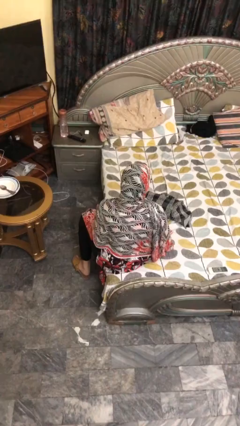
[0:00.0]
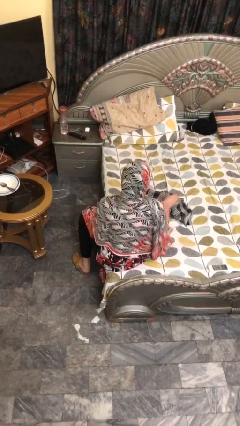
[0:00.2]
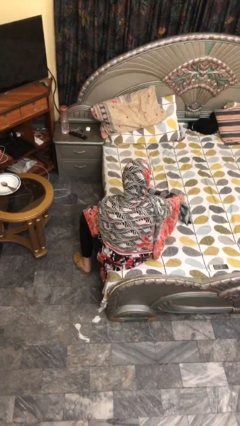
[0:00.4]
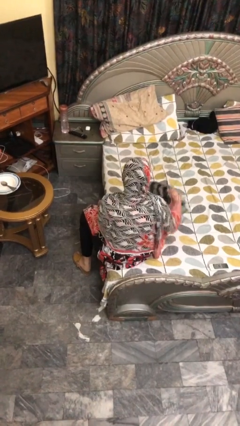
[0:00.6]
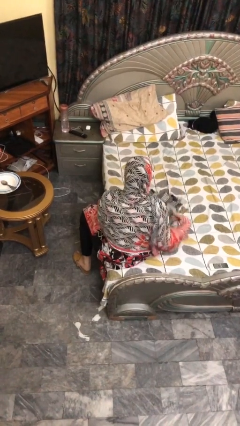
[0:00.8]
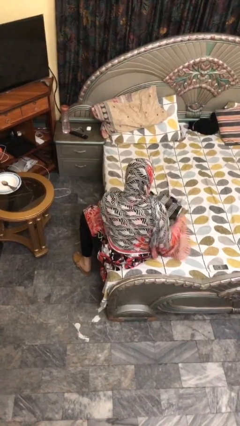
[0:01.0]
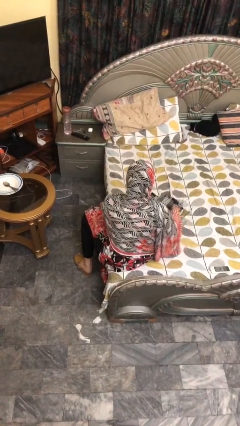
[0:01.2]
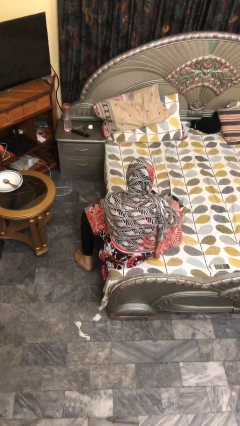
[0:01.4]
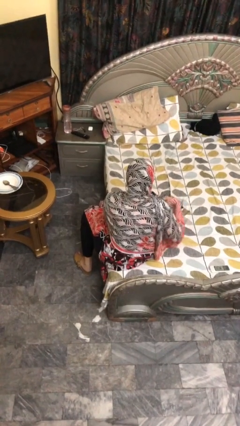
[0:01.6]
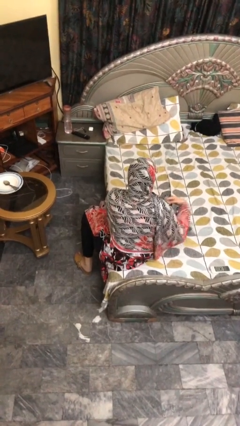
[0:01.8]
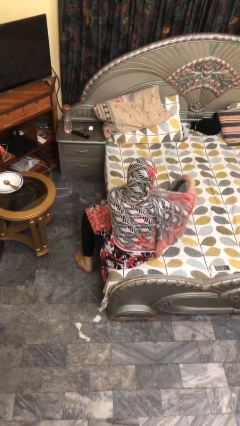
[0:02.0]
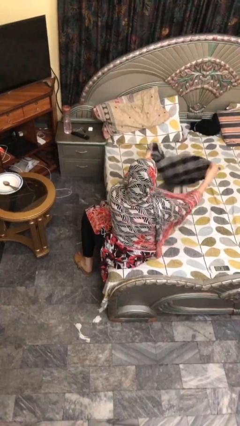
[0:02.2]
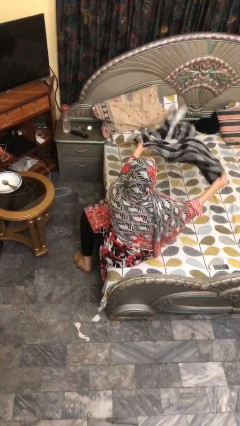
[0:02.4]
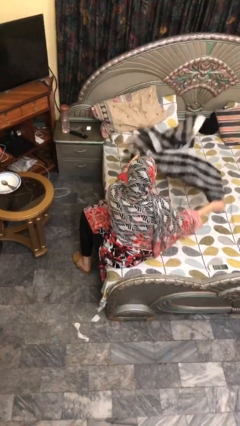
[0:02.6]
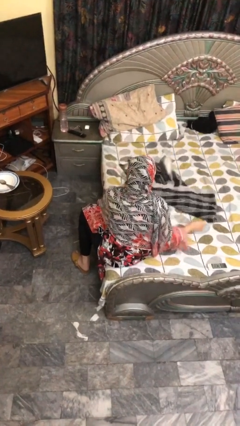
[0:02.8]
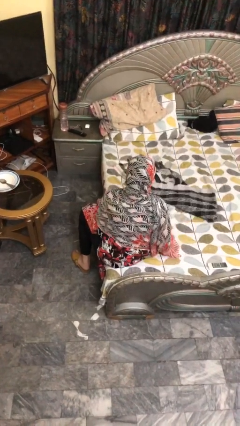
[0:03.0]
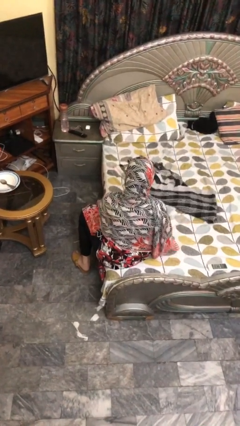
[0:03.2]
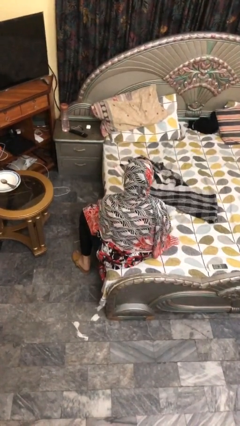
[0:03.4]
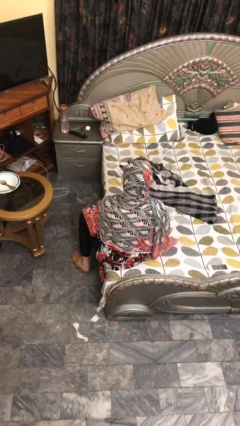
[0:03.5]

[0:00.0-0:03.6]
person unfolds blanket

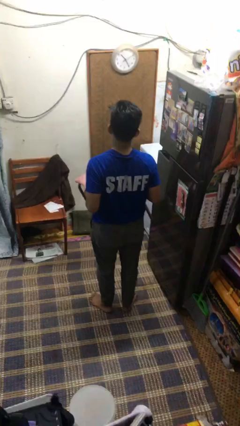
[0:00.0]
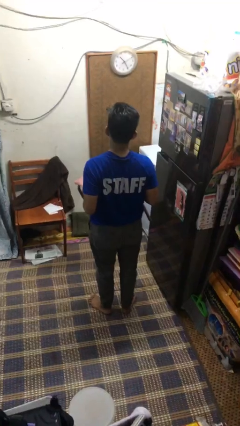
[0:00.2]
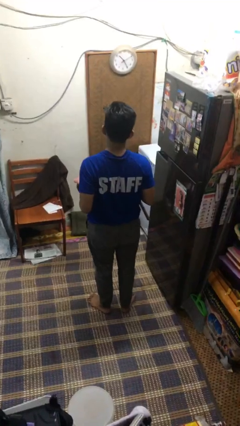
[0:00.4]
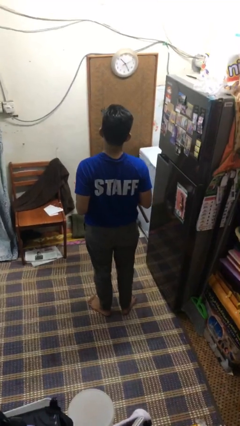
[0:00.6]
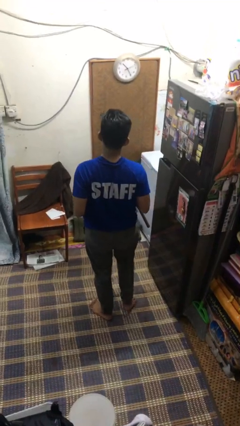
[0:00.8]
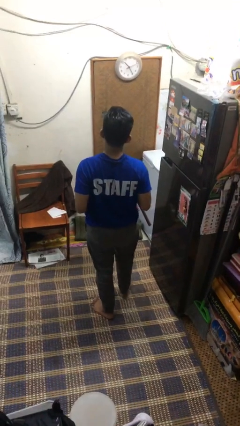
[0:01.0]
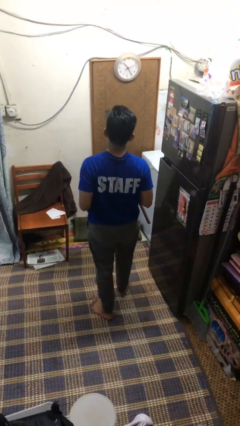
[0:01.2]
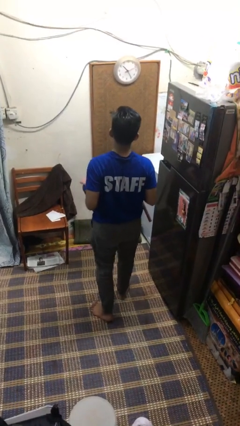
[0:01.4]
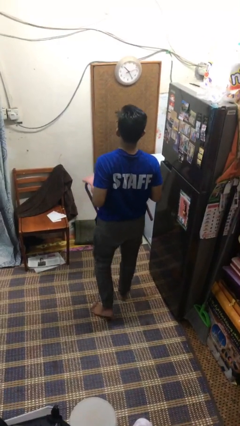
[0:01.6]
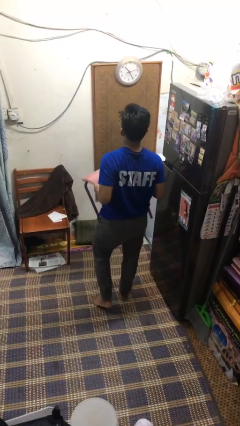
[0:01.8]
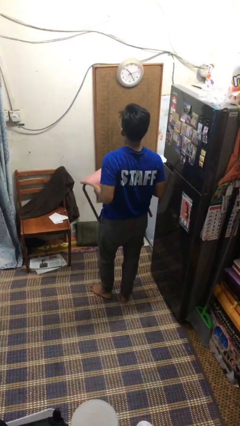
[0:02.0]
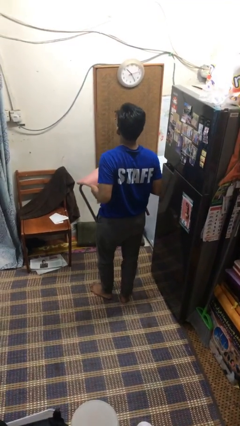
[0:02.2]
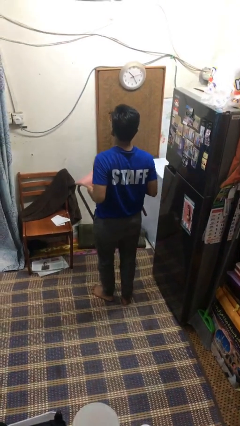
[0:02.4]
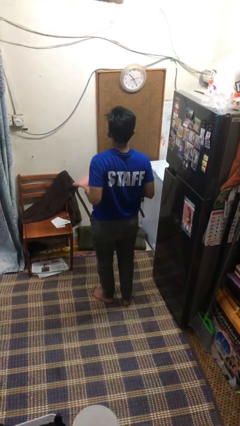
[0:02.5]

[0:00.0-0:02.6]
person carries furniture

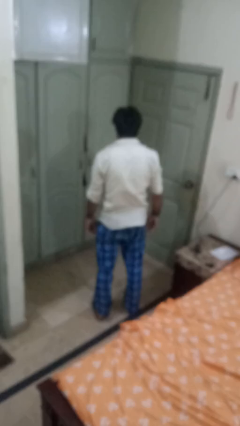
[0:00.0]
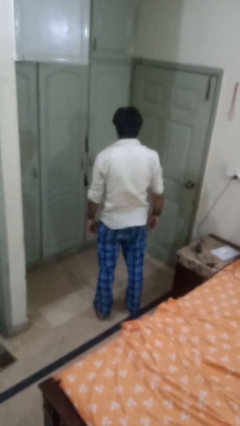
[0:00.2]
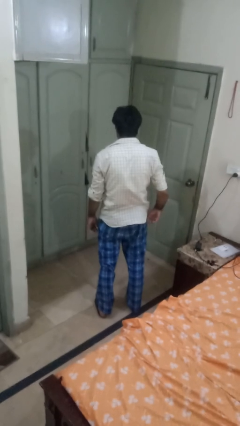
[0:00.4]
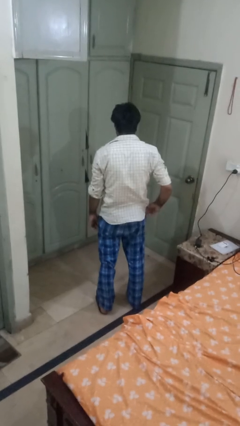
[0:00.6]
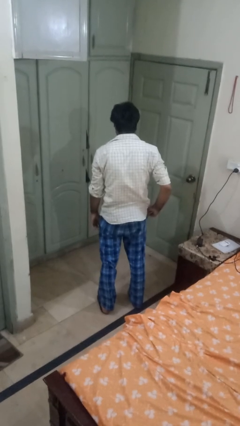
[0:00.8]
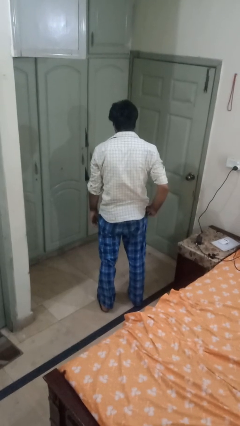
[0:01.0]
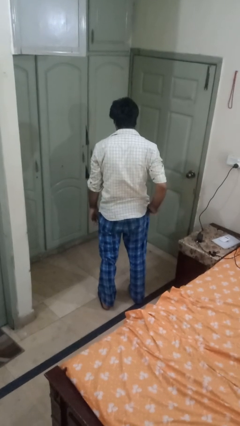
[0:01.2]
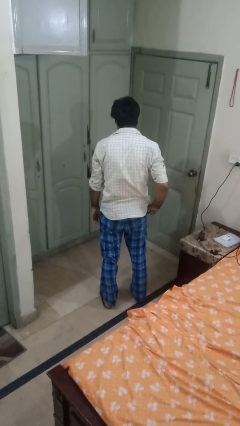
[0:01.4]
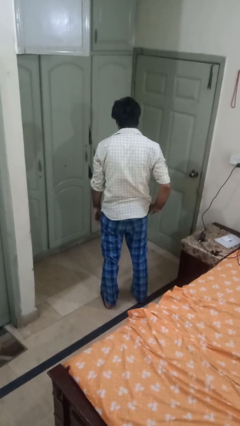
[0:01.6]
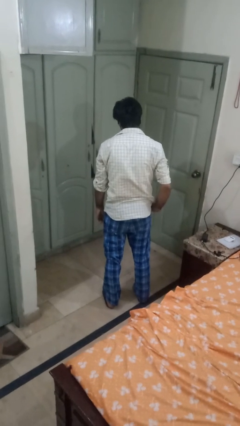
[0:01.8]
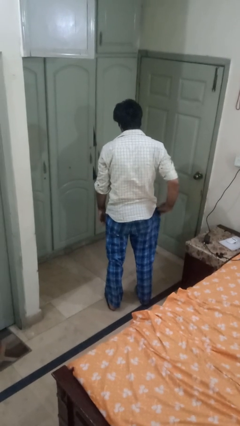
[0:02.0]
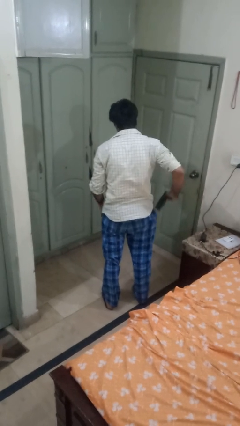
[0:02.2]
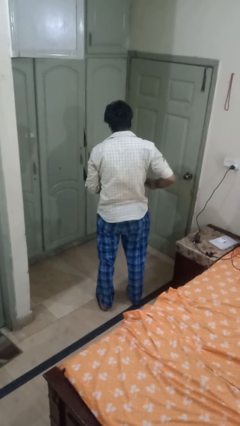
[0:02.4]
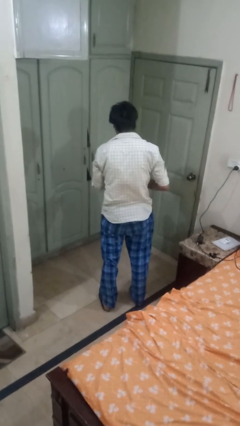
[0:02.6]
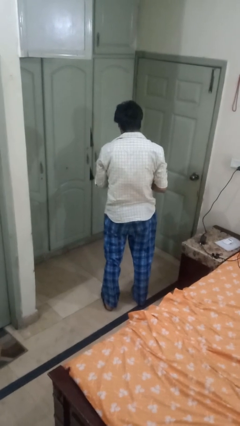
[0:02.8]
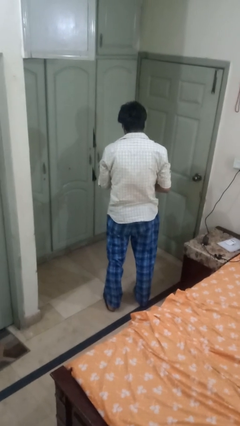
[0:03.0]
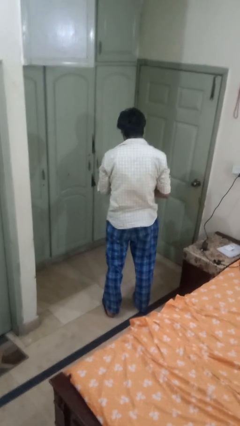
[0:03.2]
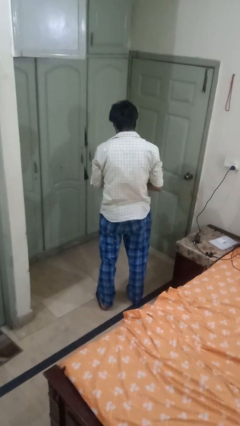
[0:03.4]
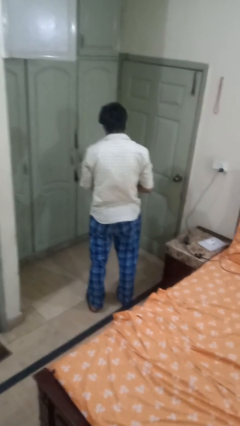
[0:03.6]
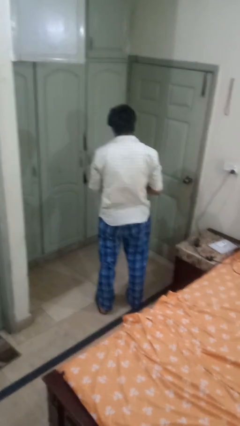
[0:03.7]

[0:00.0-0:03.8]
person takes phone from pocket

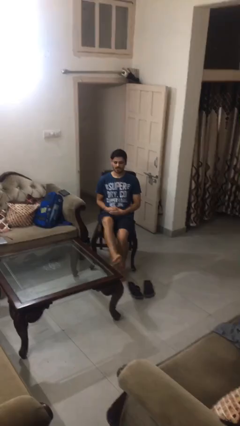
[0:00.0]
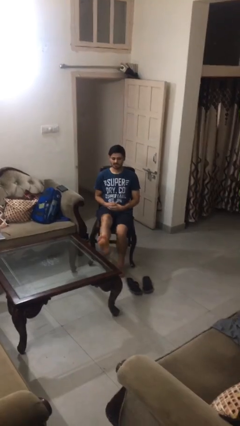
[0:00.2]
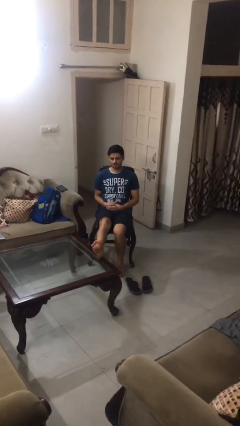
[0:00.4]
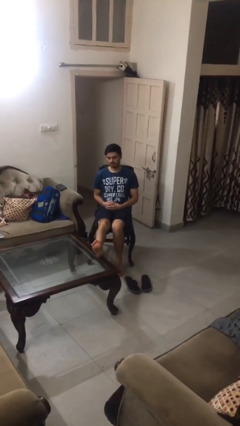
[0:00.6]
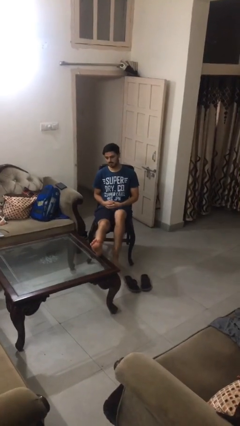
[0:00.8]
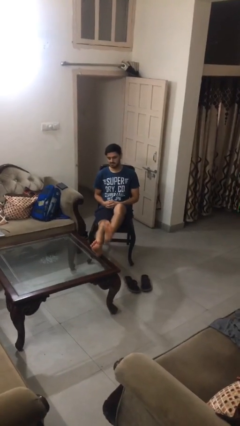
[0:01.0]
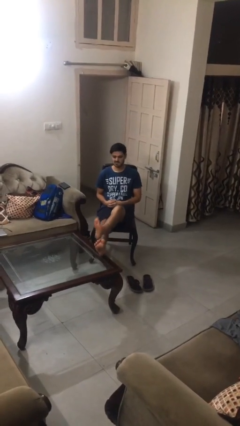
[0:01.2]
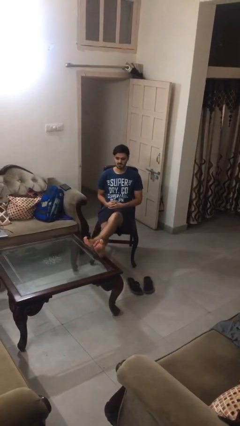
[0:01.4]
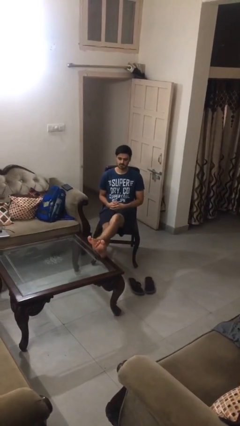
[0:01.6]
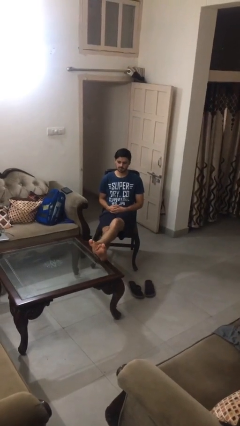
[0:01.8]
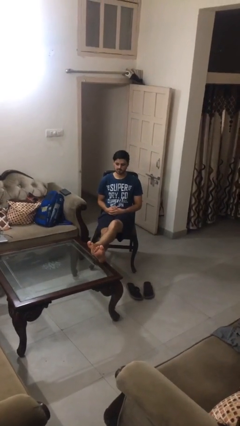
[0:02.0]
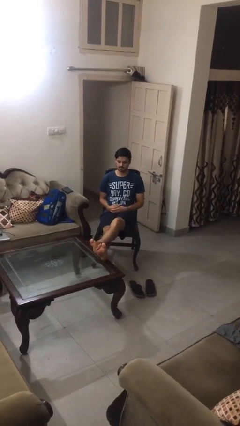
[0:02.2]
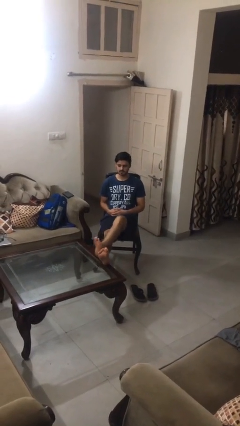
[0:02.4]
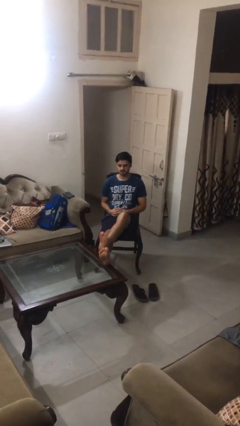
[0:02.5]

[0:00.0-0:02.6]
person puts feet up

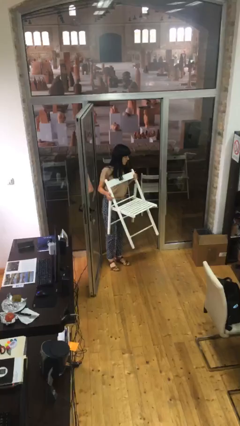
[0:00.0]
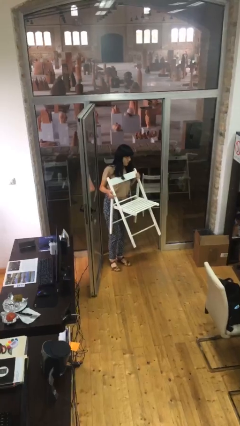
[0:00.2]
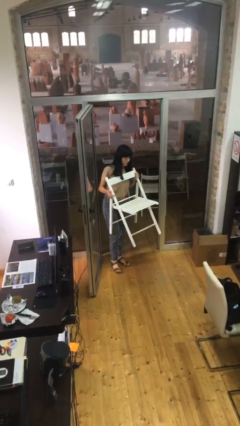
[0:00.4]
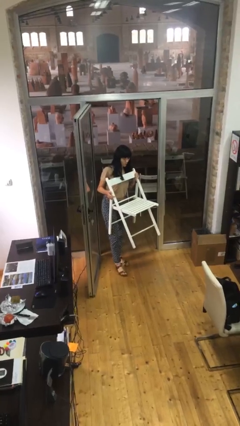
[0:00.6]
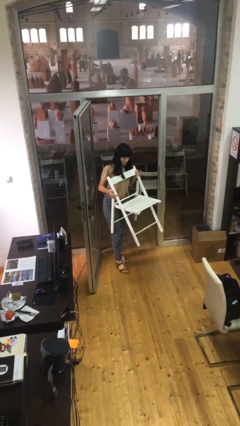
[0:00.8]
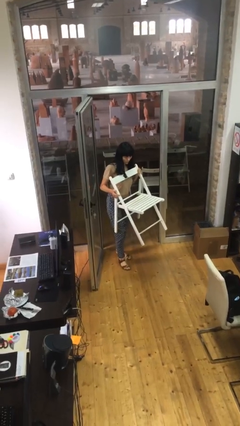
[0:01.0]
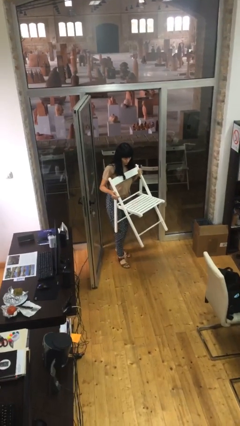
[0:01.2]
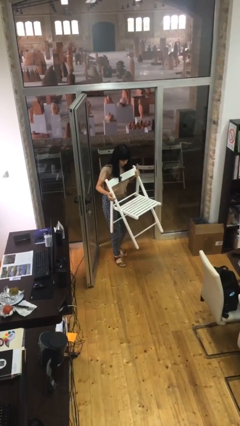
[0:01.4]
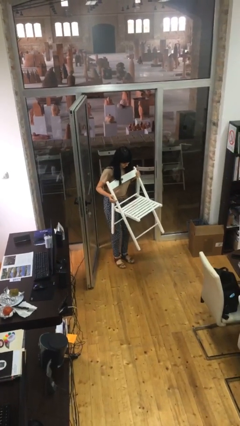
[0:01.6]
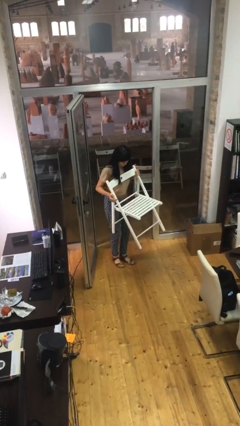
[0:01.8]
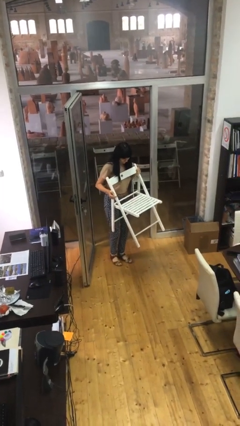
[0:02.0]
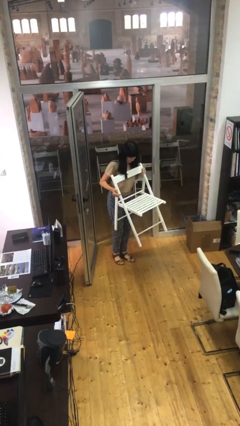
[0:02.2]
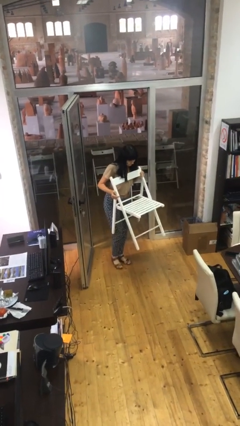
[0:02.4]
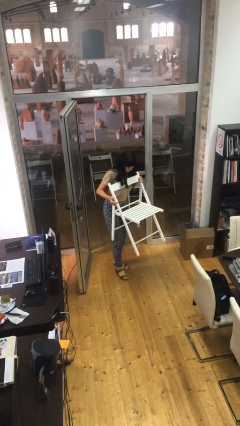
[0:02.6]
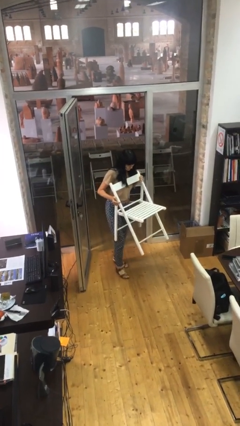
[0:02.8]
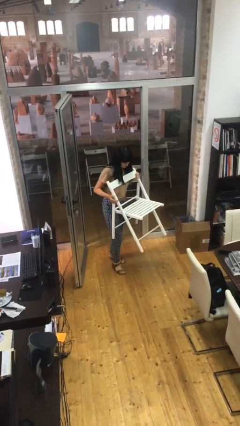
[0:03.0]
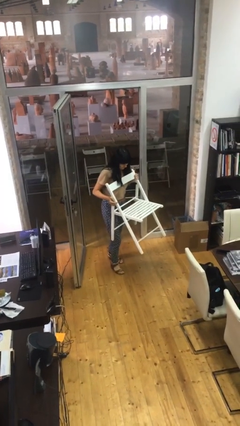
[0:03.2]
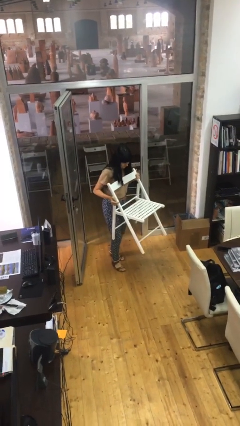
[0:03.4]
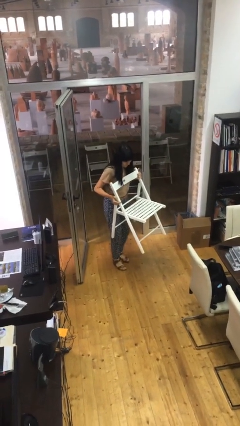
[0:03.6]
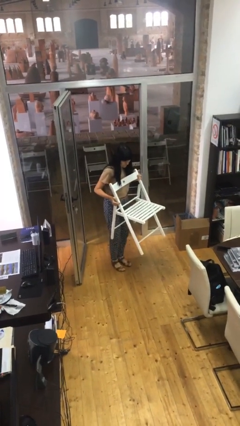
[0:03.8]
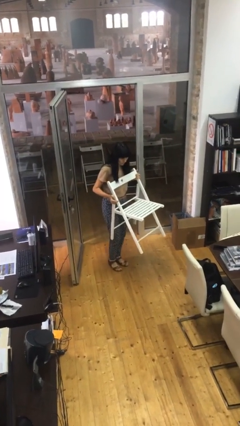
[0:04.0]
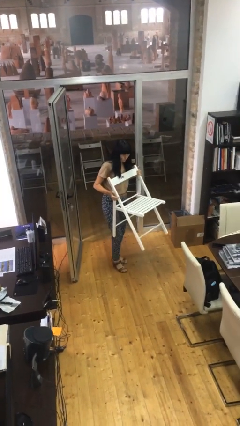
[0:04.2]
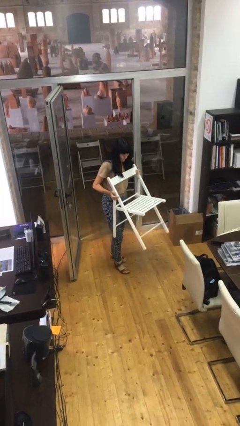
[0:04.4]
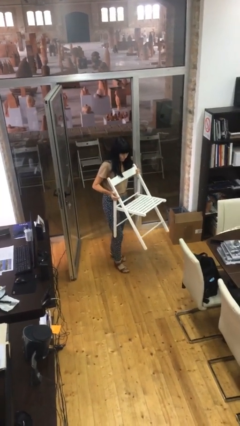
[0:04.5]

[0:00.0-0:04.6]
person carries heavy object

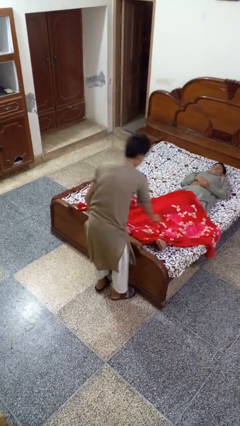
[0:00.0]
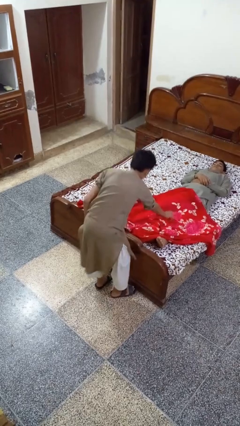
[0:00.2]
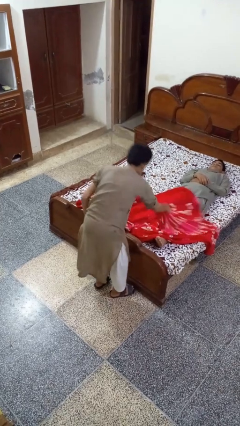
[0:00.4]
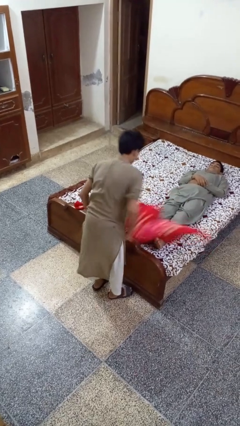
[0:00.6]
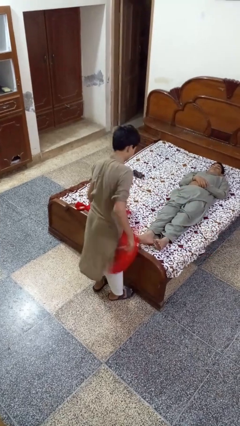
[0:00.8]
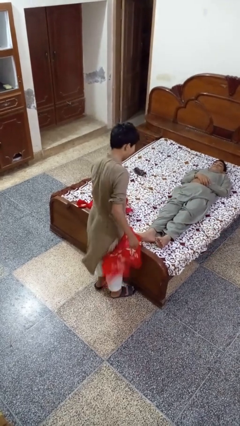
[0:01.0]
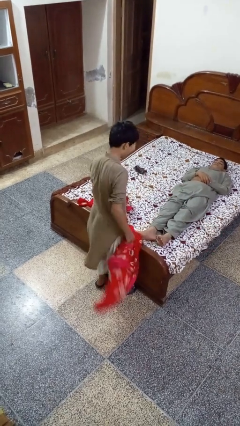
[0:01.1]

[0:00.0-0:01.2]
person uncovers friend with blanket
